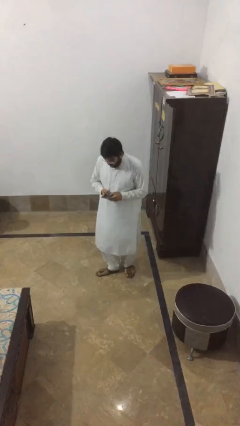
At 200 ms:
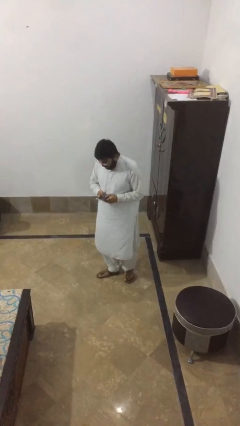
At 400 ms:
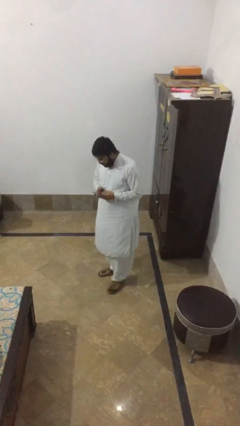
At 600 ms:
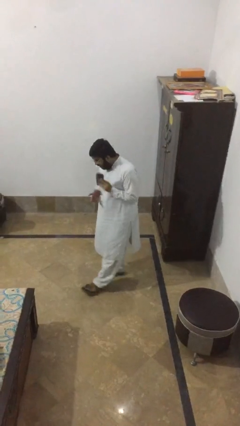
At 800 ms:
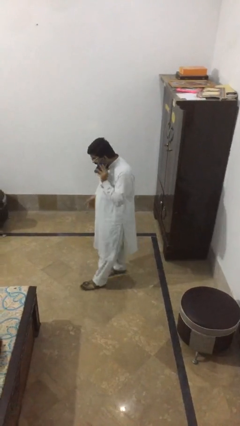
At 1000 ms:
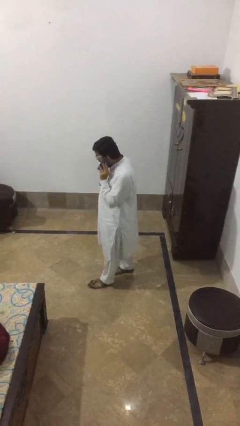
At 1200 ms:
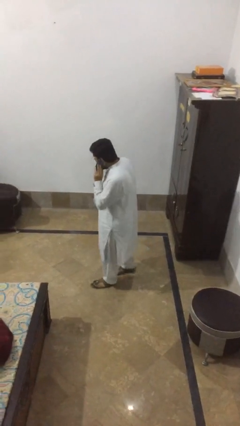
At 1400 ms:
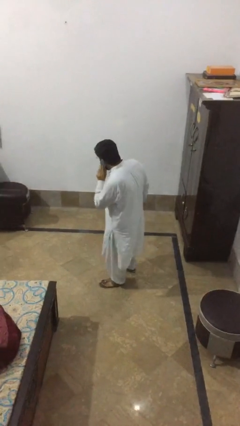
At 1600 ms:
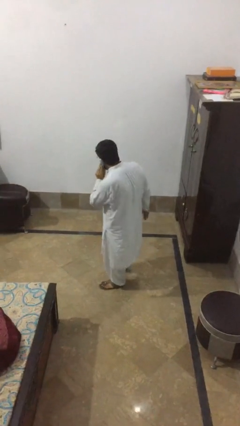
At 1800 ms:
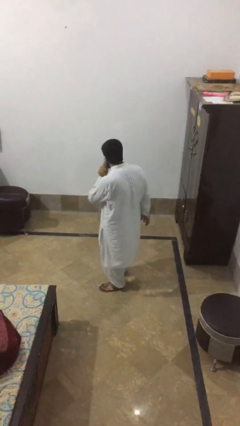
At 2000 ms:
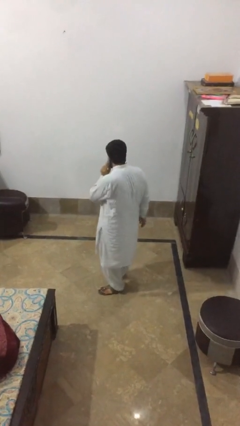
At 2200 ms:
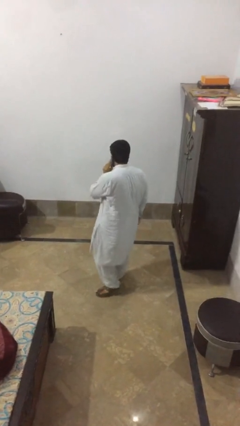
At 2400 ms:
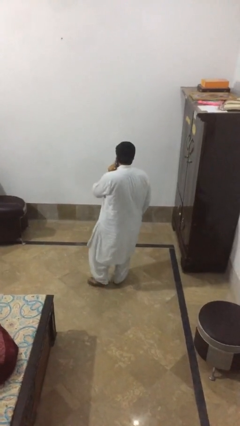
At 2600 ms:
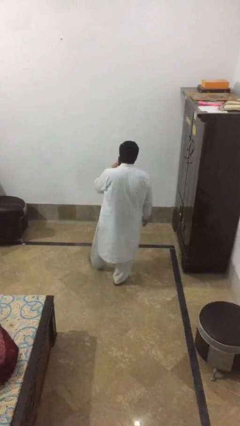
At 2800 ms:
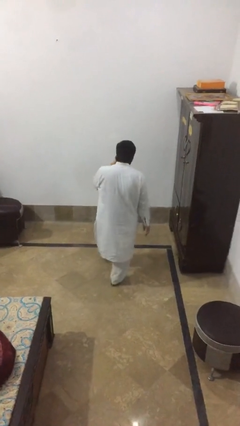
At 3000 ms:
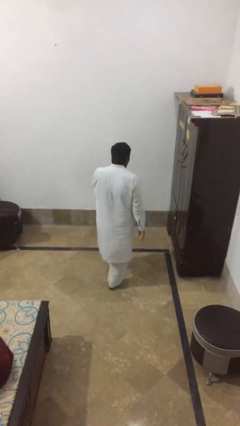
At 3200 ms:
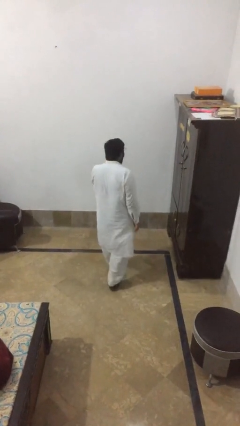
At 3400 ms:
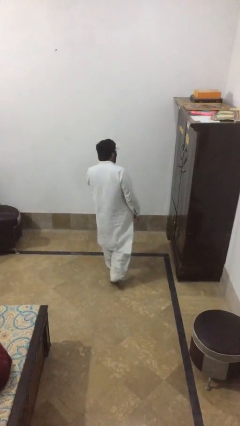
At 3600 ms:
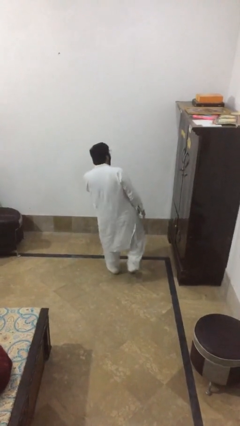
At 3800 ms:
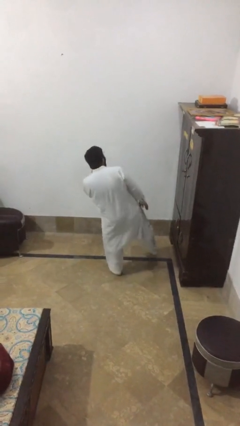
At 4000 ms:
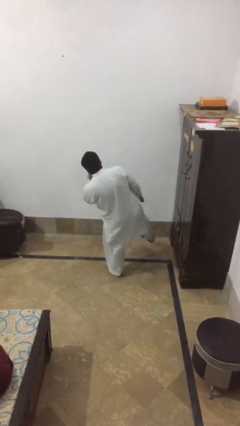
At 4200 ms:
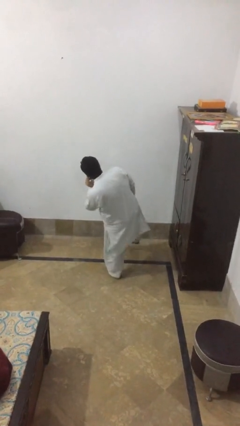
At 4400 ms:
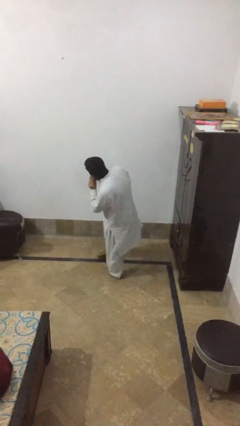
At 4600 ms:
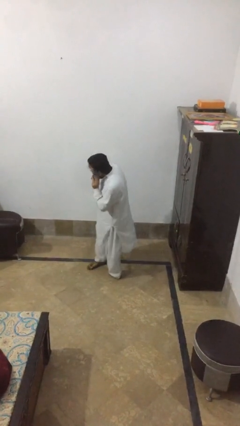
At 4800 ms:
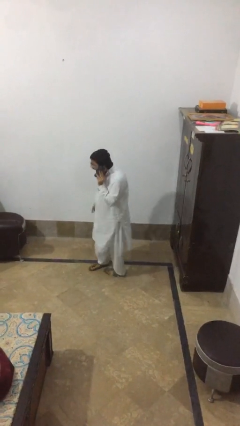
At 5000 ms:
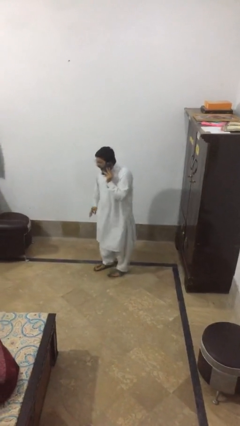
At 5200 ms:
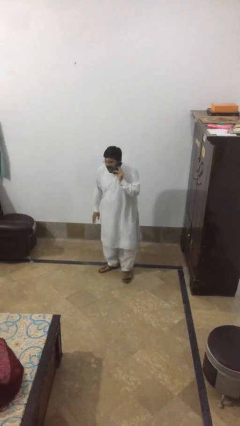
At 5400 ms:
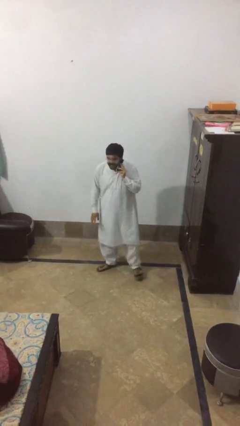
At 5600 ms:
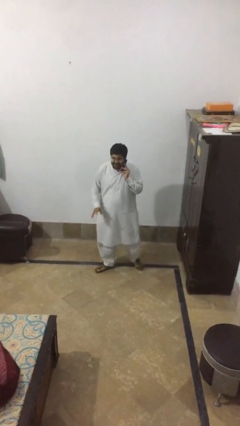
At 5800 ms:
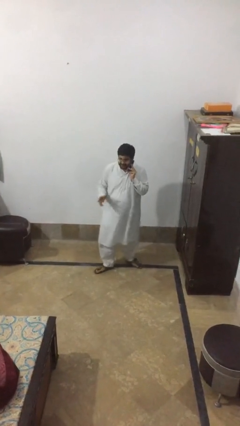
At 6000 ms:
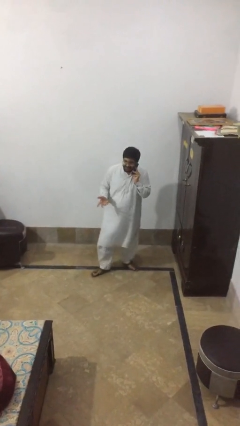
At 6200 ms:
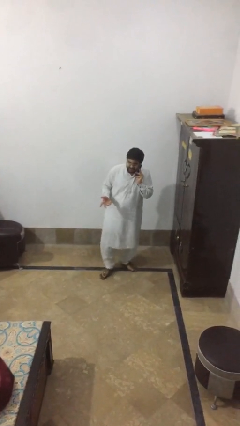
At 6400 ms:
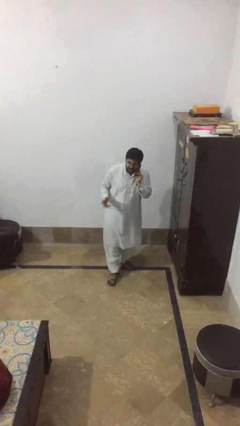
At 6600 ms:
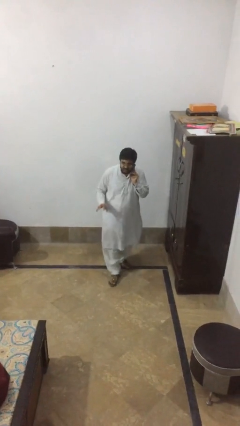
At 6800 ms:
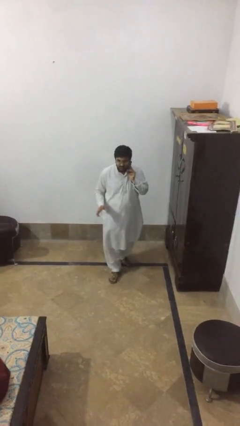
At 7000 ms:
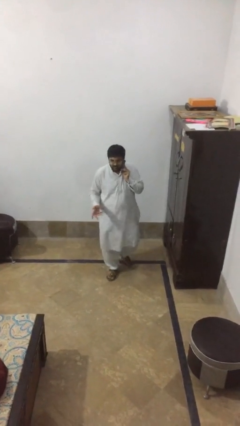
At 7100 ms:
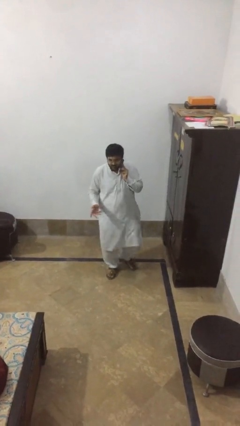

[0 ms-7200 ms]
person talks on phone

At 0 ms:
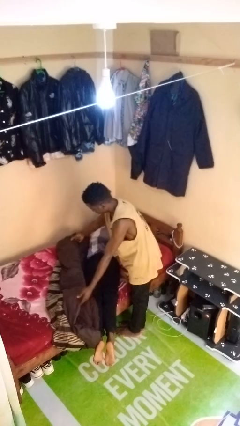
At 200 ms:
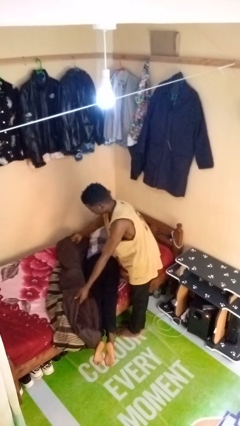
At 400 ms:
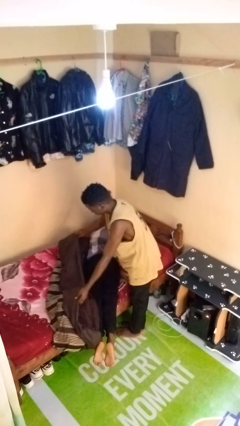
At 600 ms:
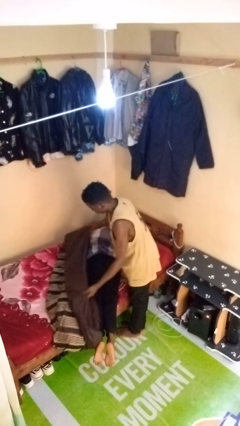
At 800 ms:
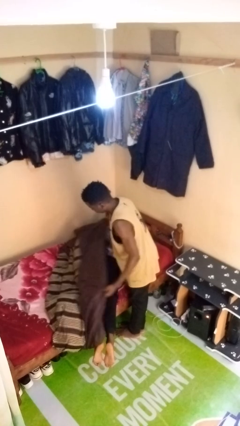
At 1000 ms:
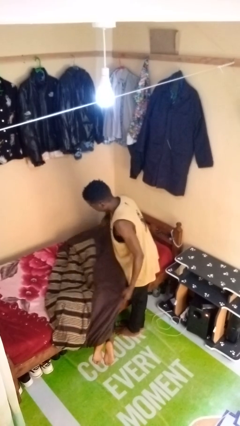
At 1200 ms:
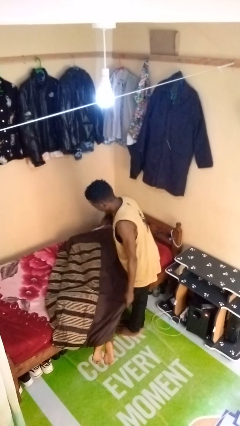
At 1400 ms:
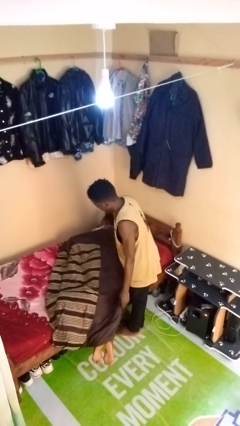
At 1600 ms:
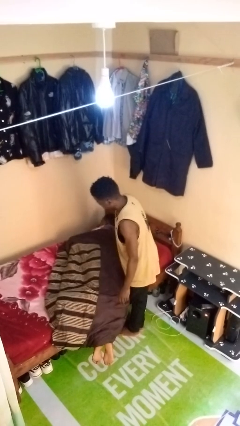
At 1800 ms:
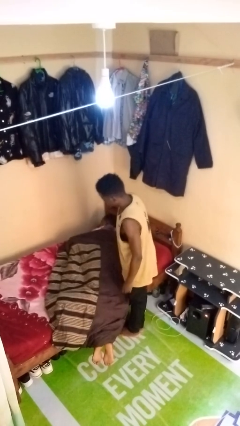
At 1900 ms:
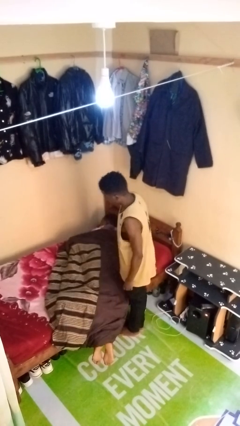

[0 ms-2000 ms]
person covers friend with blanket

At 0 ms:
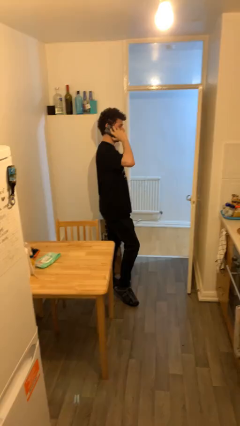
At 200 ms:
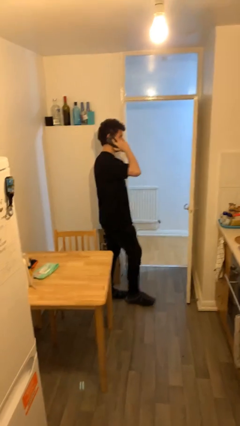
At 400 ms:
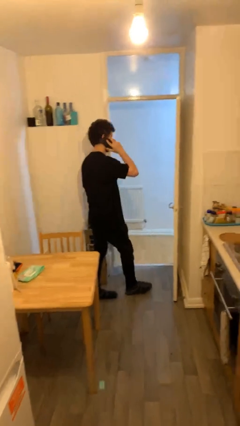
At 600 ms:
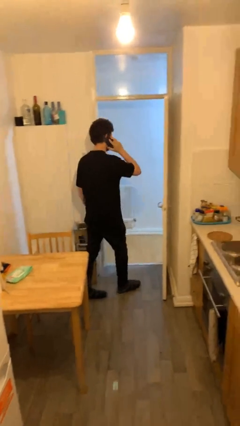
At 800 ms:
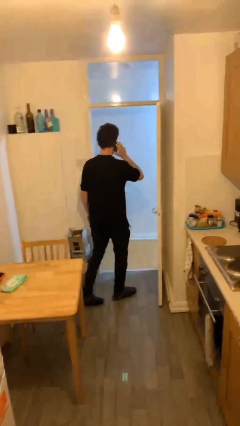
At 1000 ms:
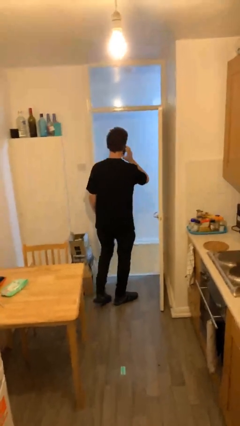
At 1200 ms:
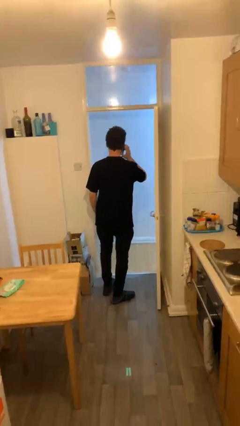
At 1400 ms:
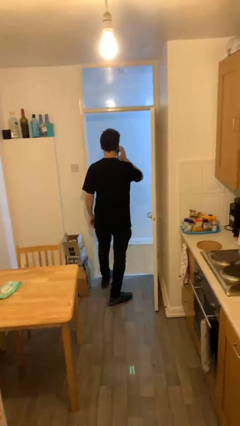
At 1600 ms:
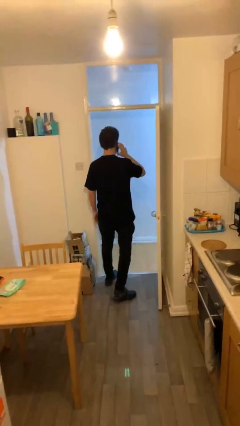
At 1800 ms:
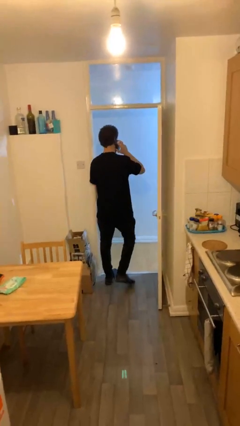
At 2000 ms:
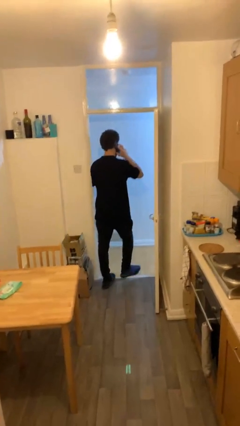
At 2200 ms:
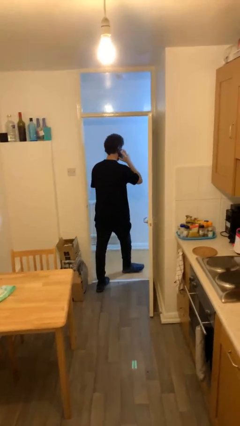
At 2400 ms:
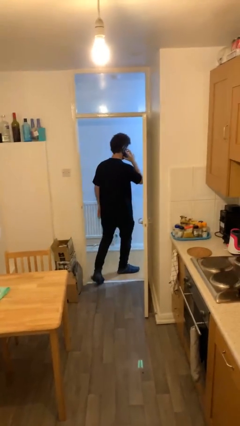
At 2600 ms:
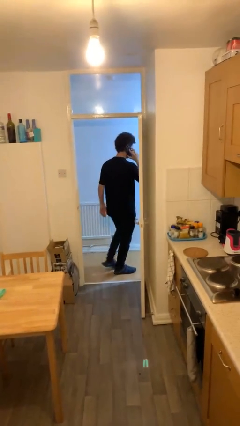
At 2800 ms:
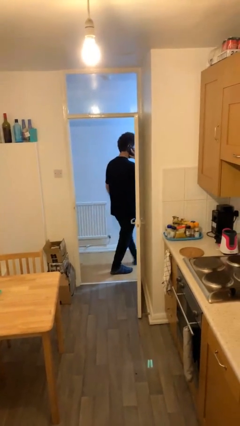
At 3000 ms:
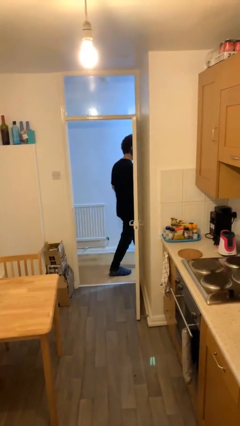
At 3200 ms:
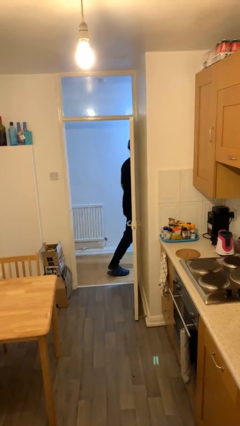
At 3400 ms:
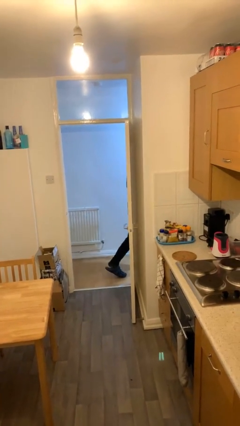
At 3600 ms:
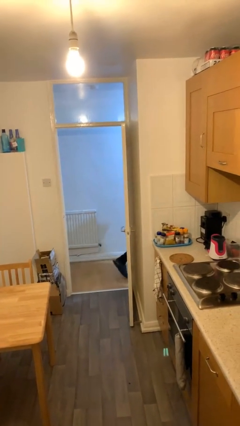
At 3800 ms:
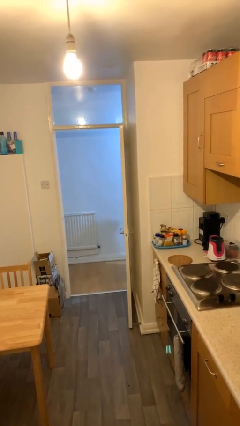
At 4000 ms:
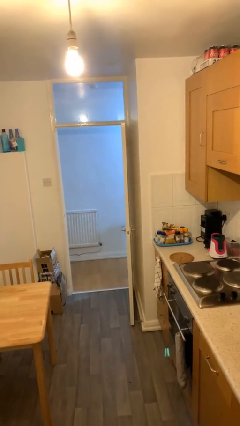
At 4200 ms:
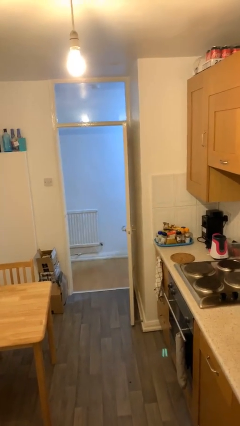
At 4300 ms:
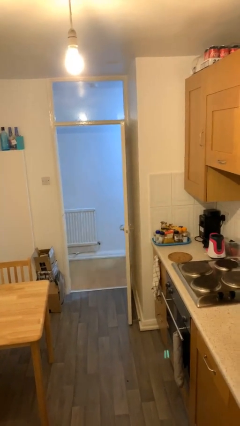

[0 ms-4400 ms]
person exits scene through structure

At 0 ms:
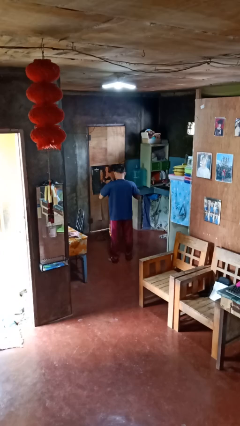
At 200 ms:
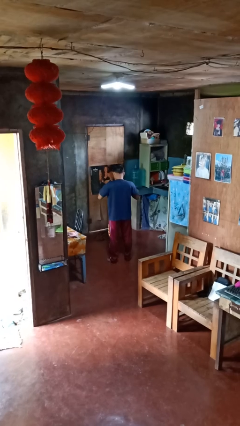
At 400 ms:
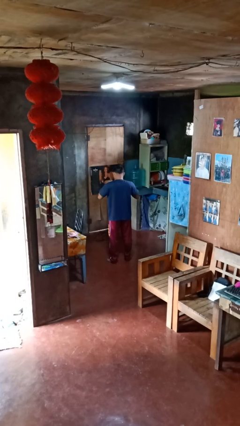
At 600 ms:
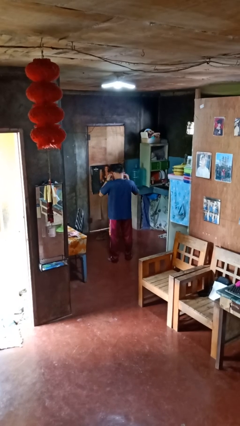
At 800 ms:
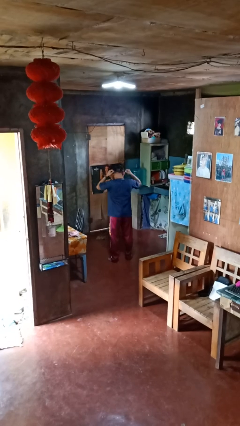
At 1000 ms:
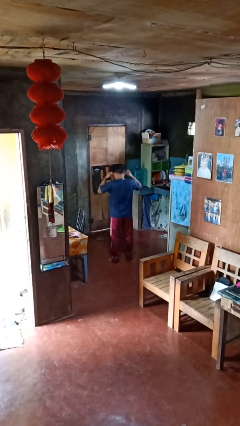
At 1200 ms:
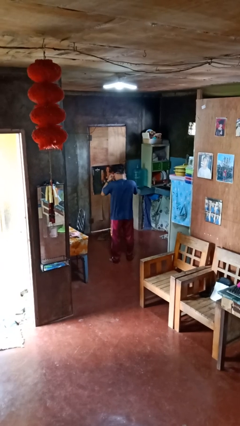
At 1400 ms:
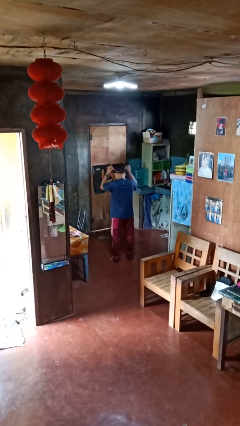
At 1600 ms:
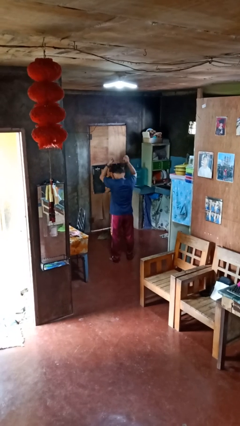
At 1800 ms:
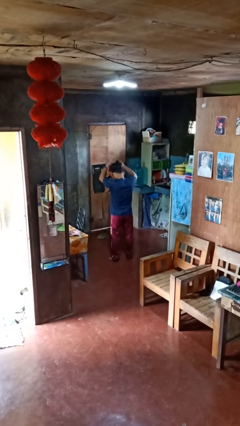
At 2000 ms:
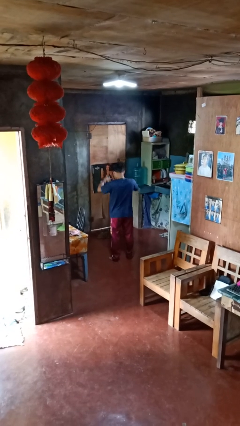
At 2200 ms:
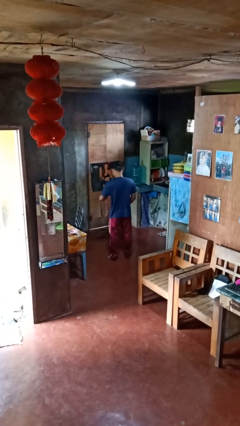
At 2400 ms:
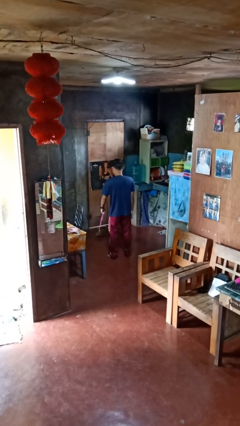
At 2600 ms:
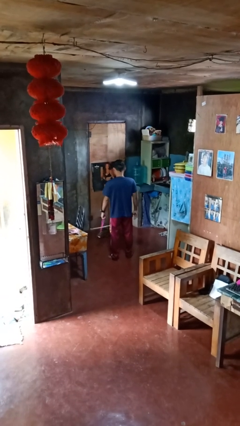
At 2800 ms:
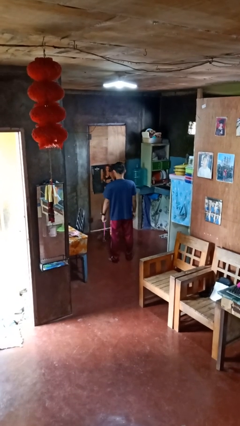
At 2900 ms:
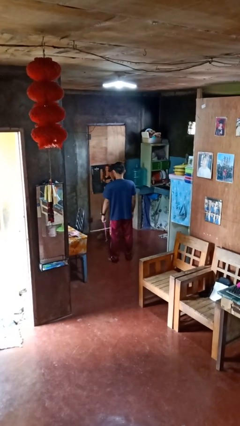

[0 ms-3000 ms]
person takes off necklace

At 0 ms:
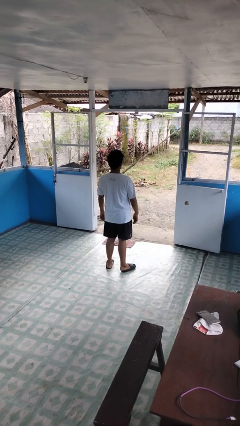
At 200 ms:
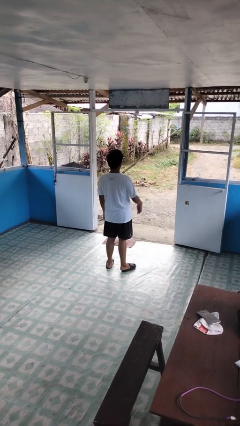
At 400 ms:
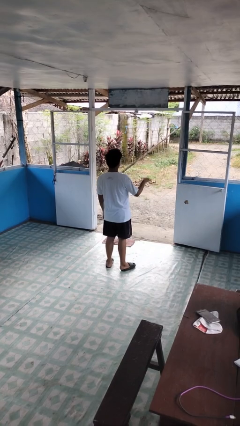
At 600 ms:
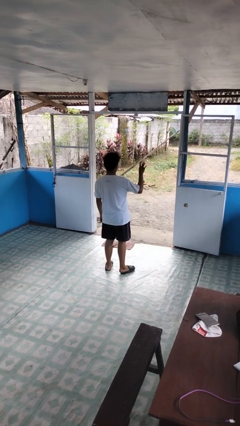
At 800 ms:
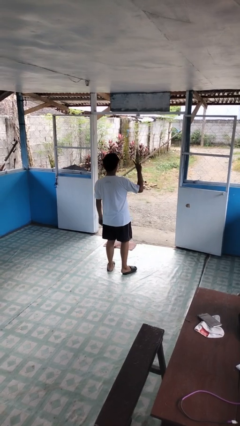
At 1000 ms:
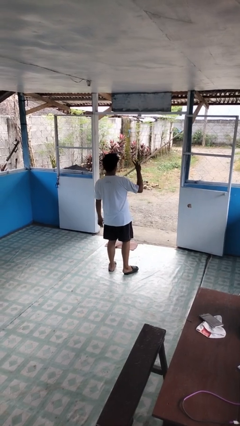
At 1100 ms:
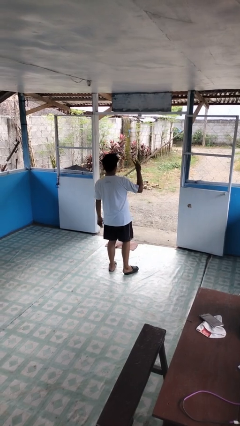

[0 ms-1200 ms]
person gestures number four
